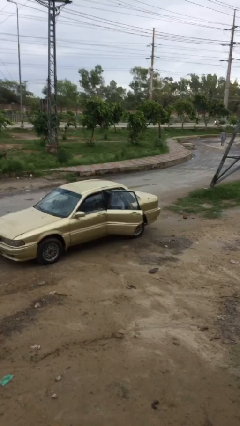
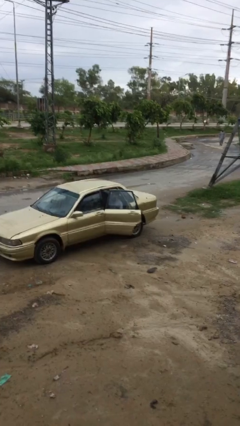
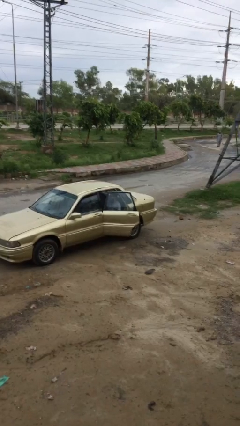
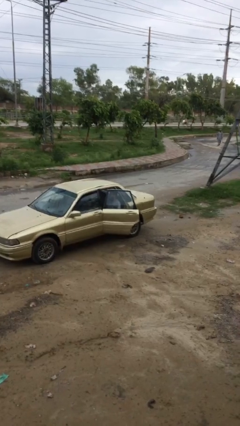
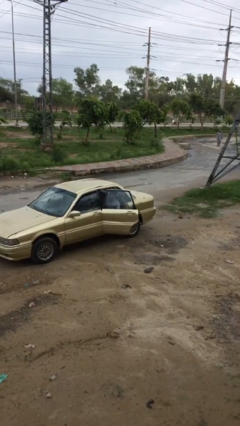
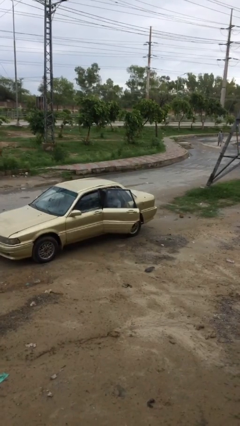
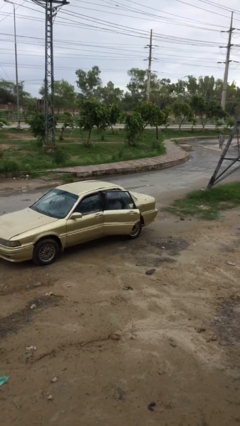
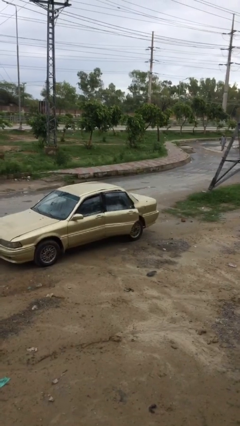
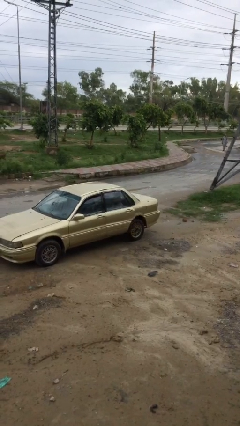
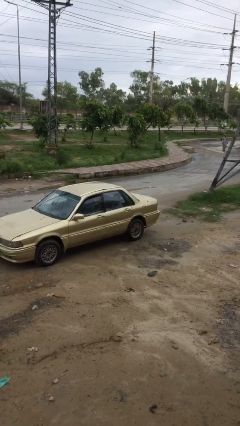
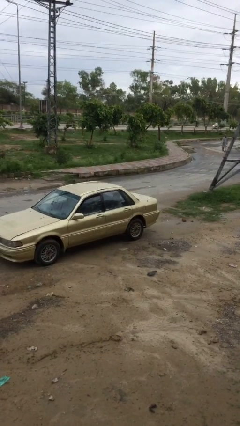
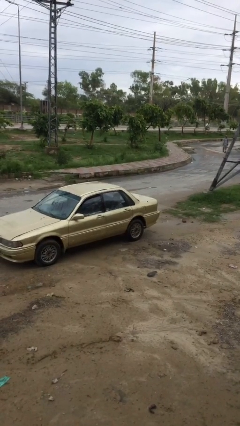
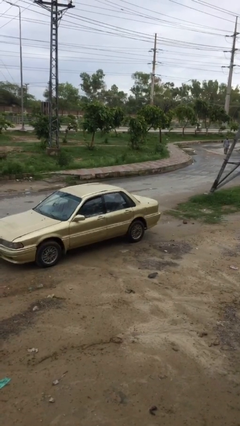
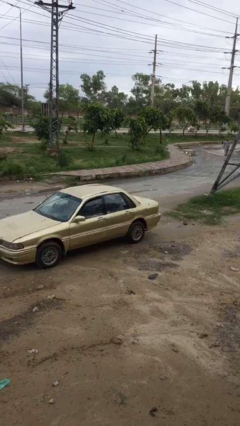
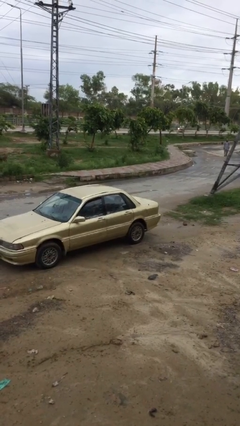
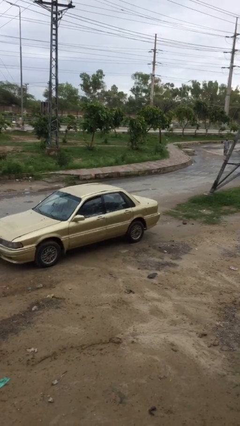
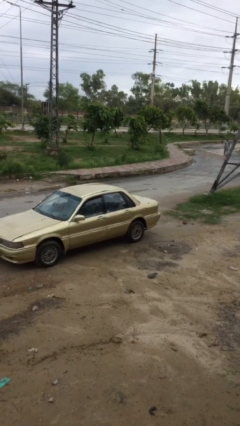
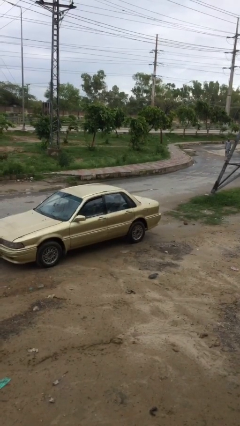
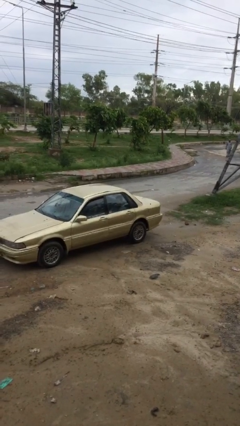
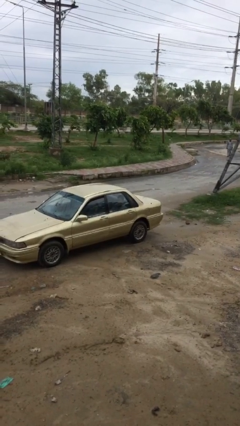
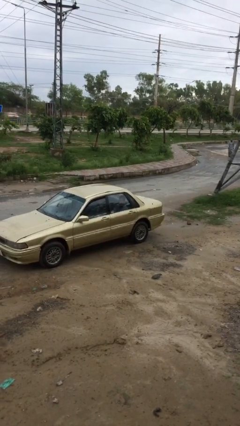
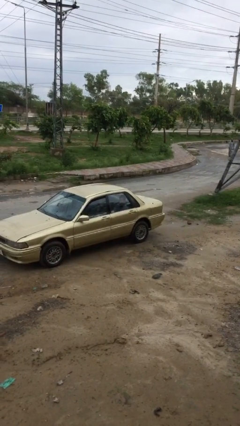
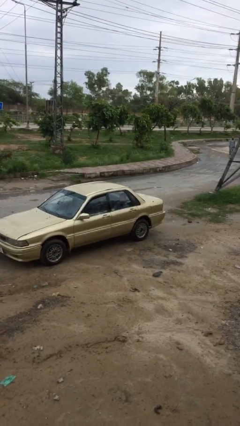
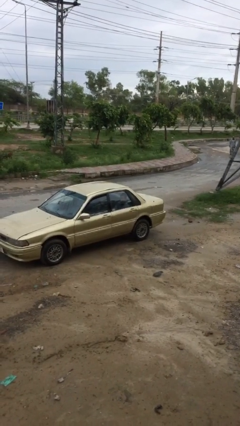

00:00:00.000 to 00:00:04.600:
person closes car door

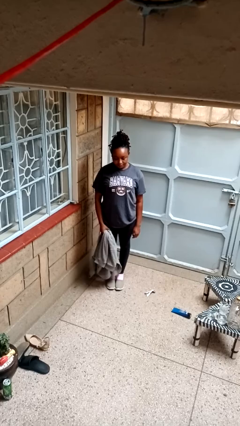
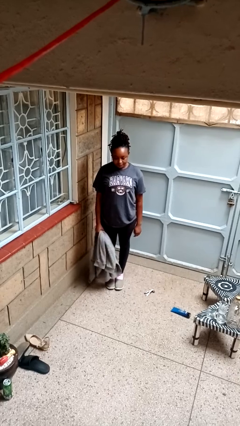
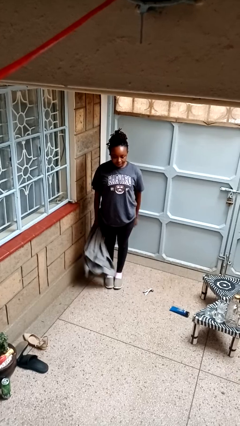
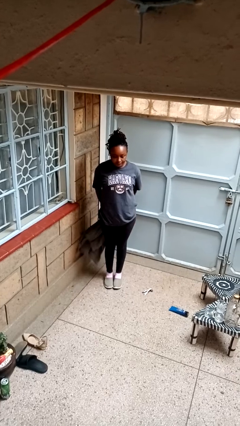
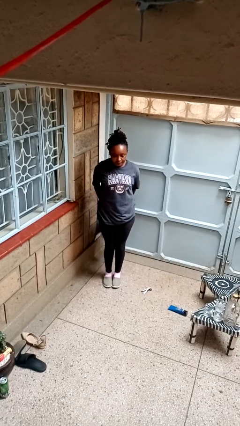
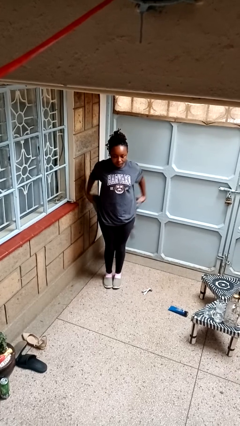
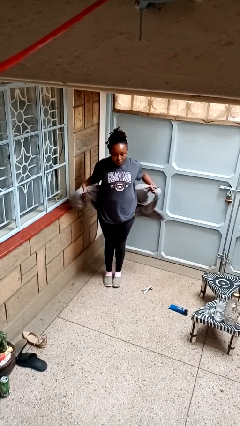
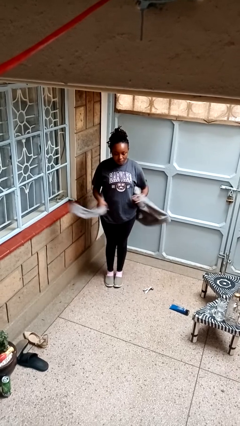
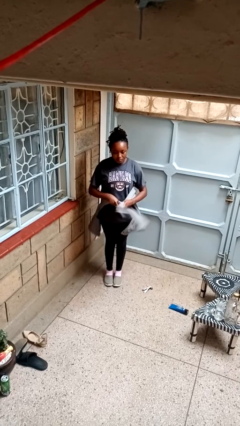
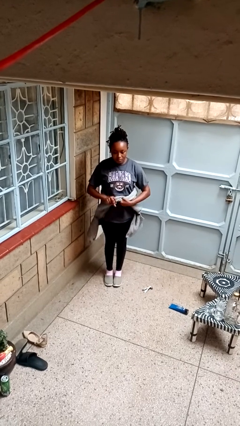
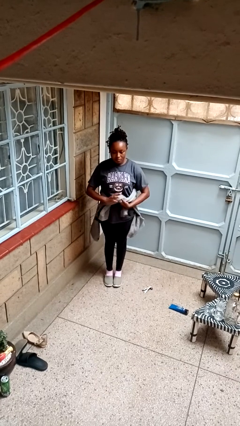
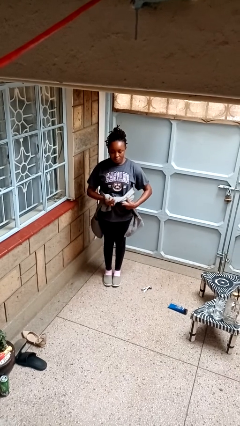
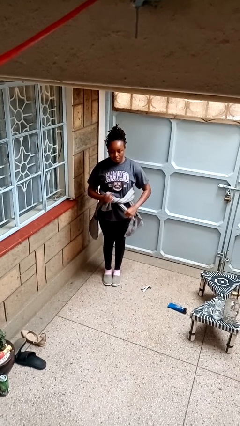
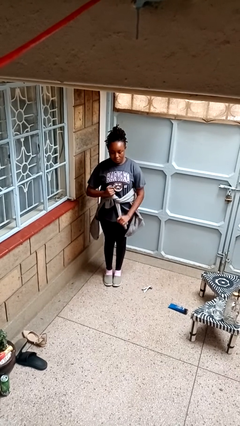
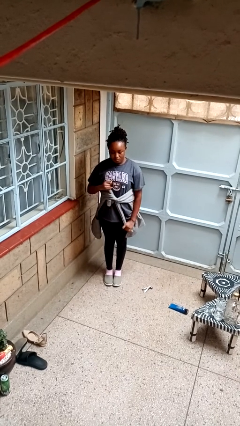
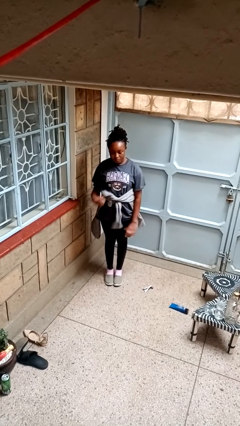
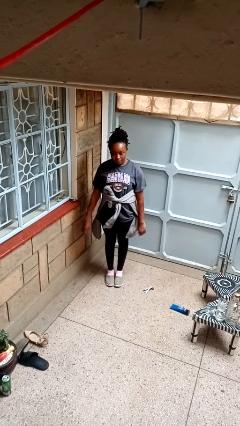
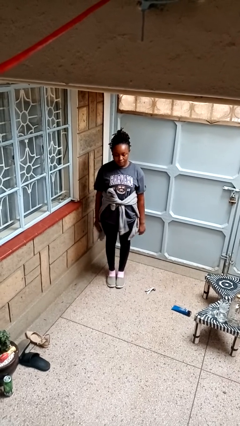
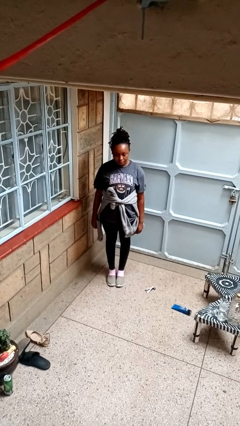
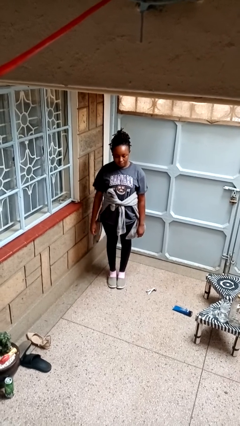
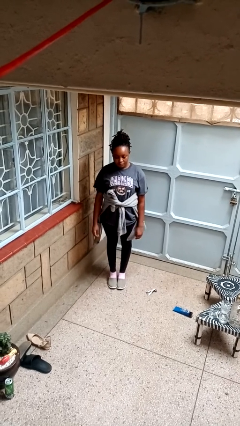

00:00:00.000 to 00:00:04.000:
person ties jacket around waist

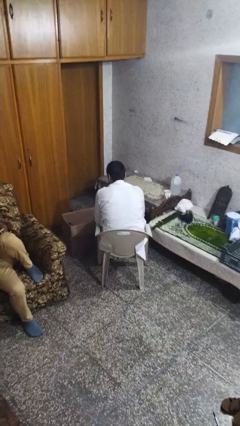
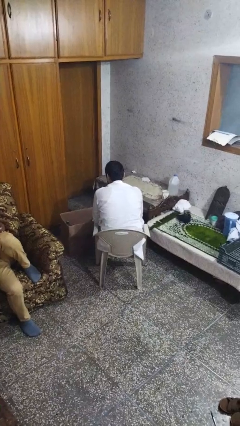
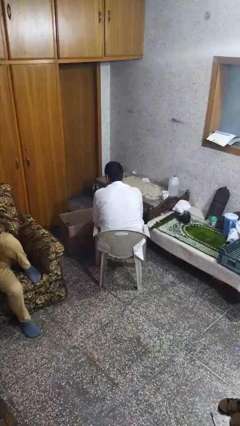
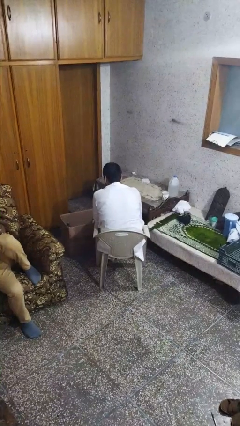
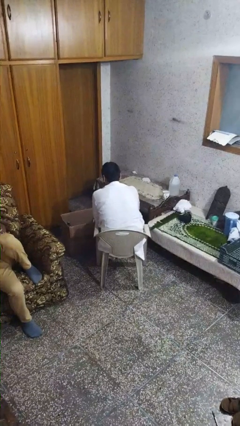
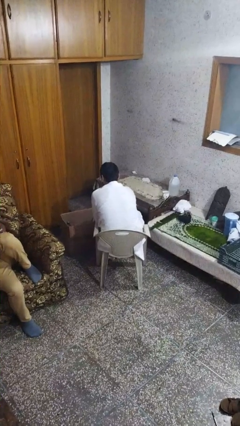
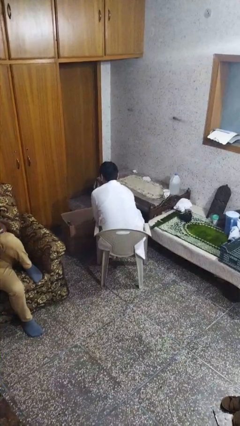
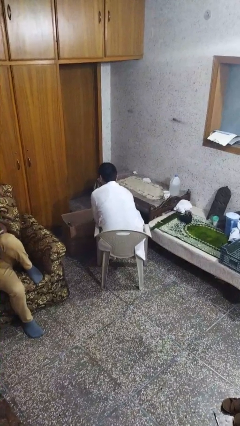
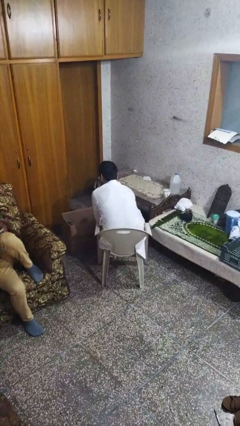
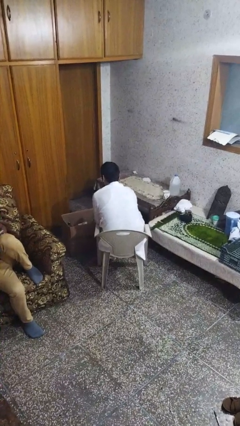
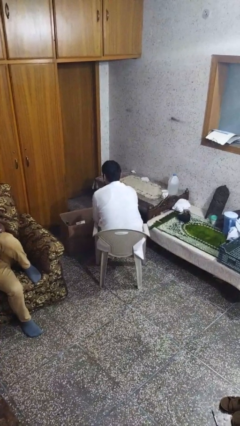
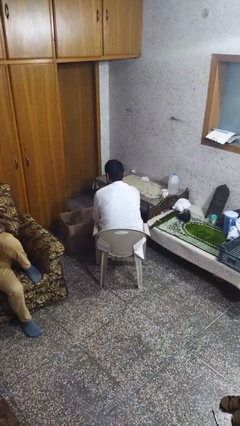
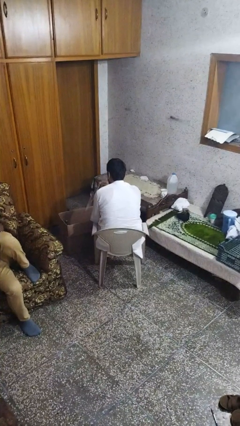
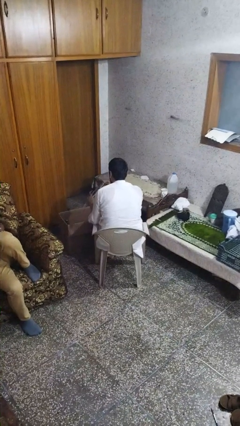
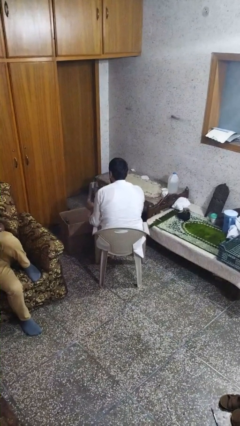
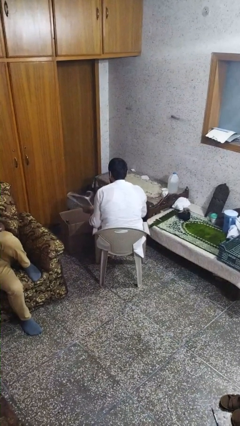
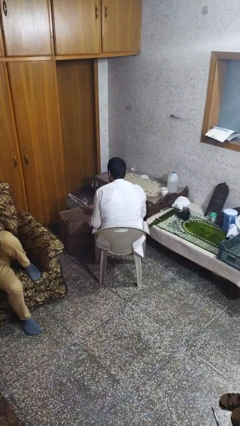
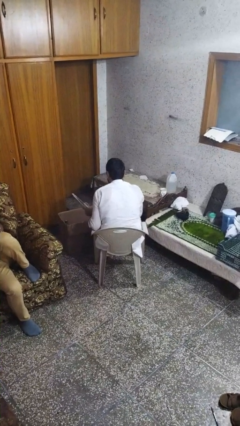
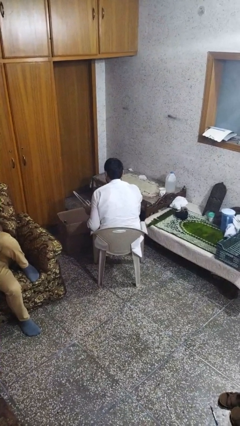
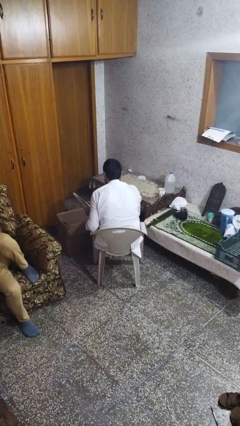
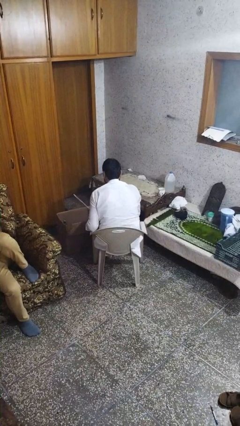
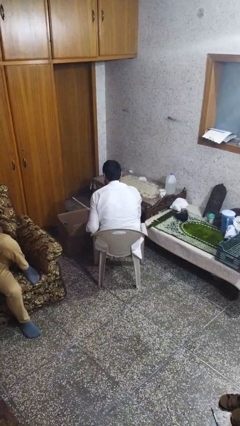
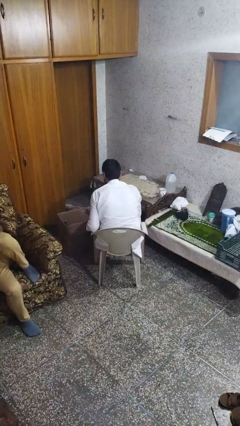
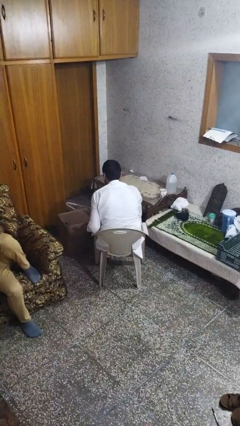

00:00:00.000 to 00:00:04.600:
person takes object from box

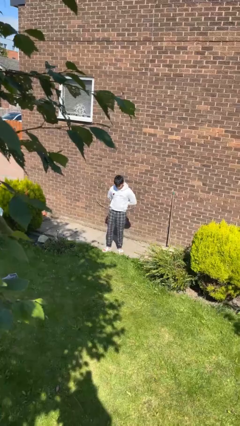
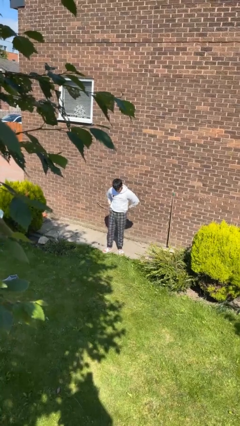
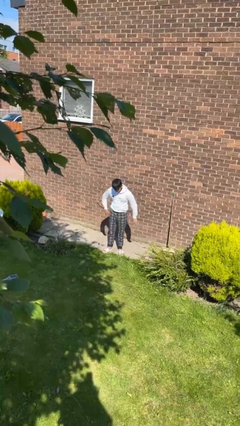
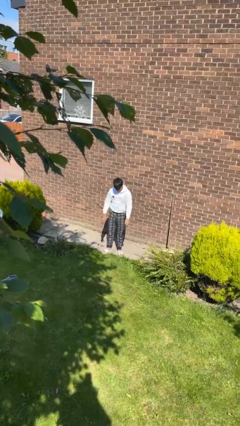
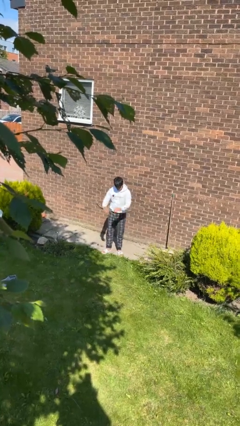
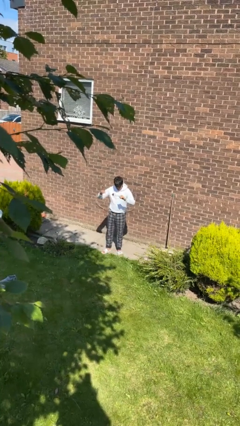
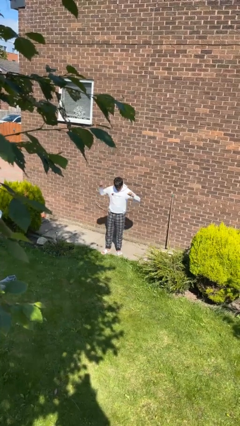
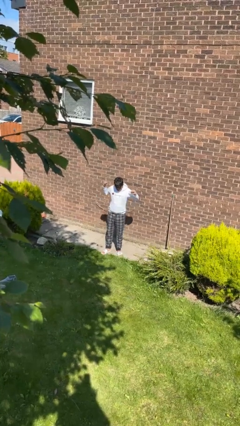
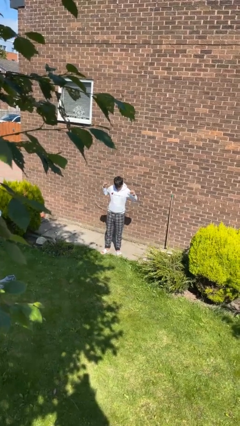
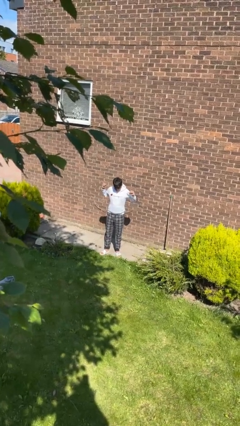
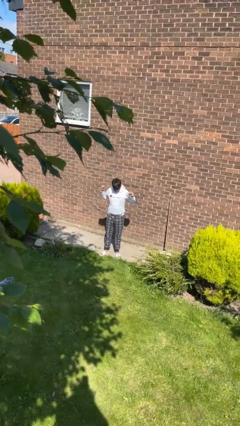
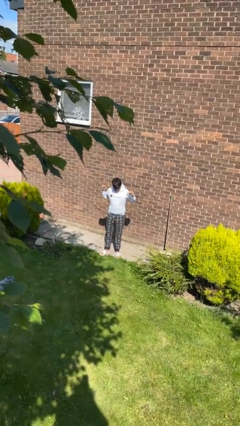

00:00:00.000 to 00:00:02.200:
person stretches arms to side

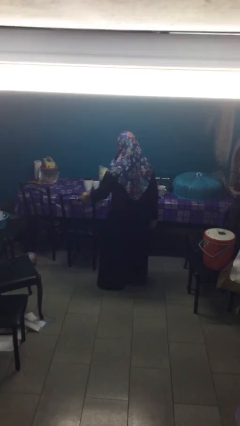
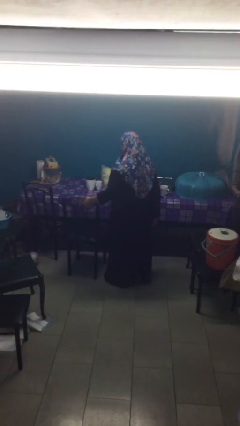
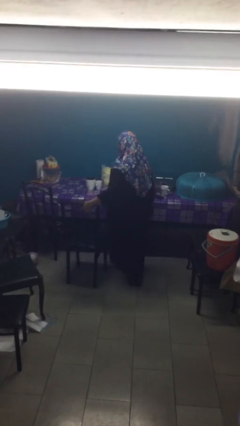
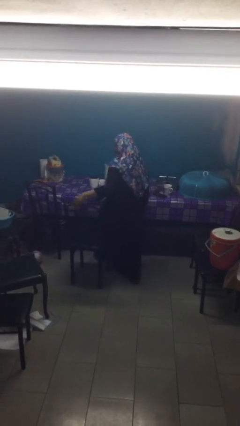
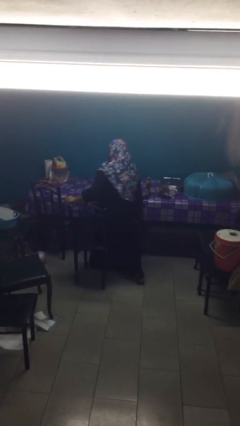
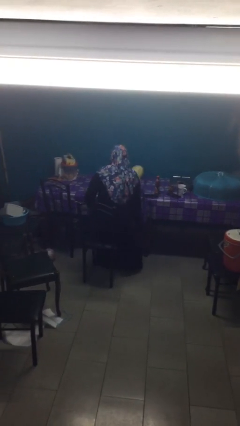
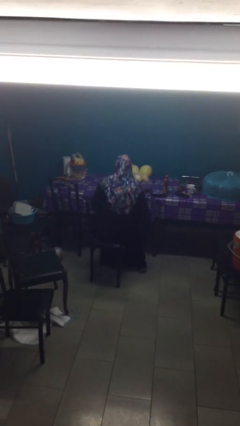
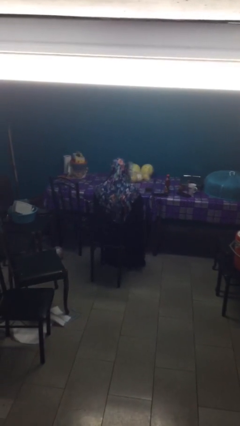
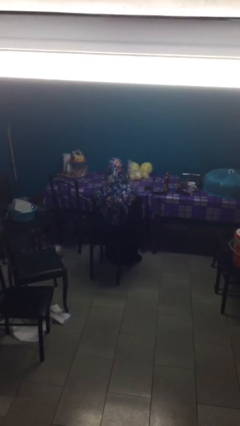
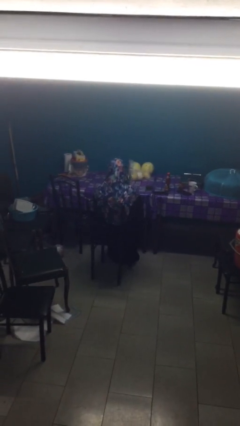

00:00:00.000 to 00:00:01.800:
person sits down

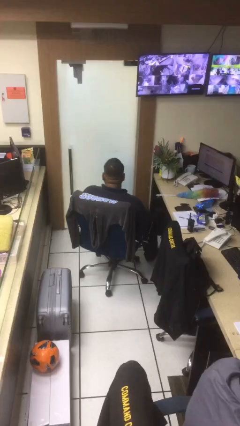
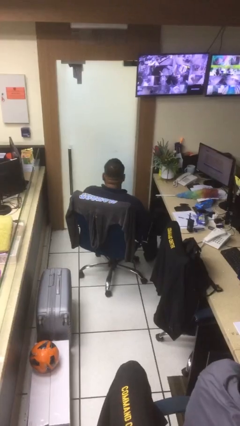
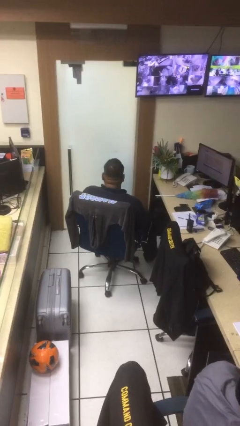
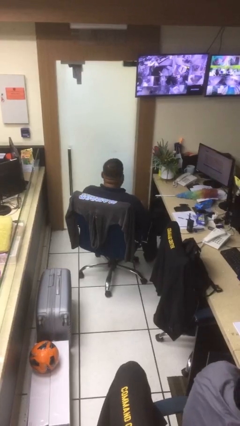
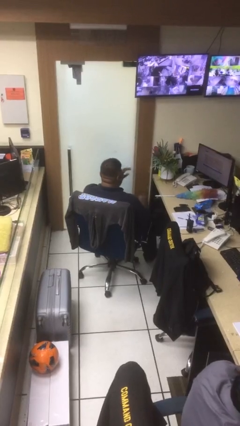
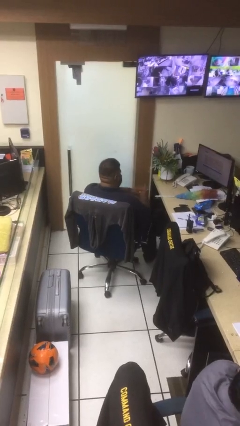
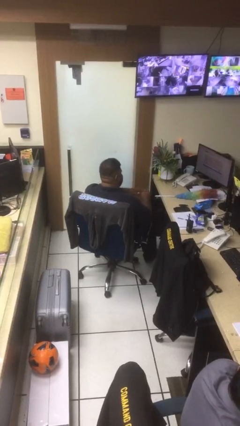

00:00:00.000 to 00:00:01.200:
person swats bug
